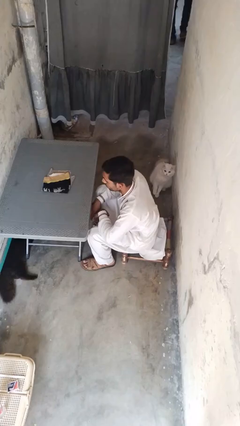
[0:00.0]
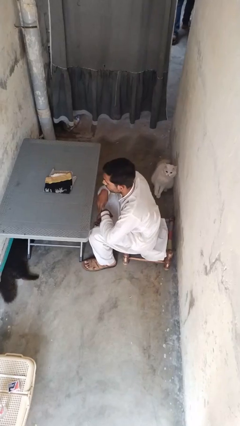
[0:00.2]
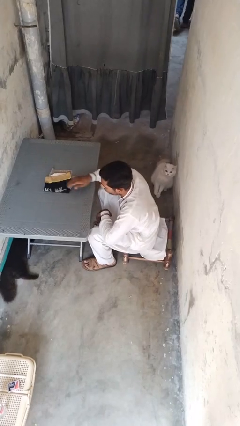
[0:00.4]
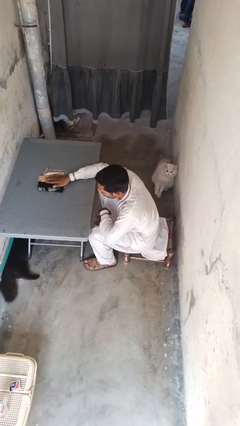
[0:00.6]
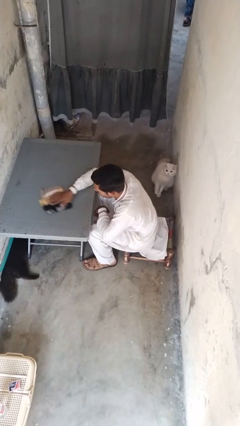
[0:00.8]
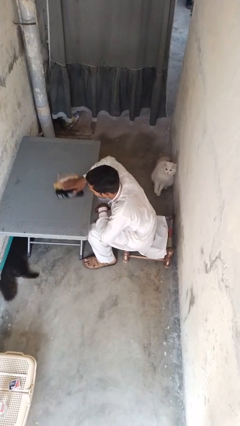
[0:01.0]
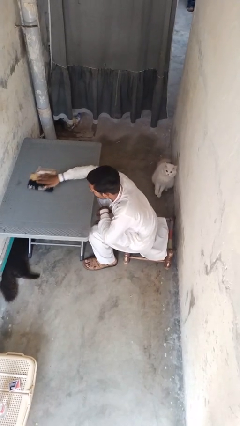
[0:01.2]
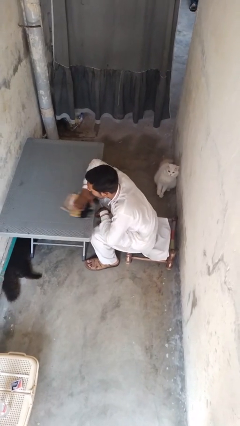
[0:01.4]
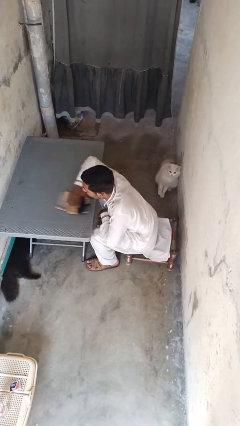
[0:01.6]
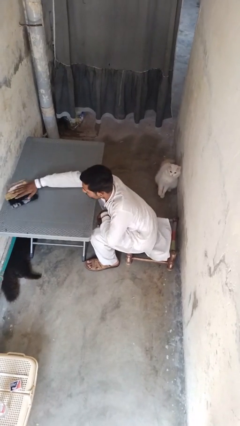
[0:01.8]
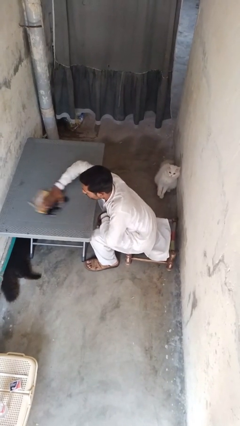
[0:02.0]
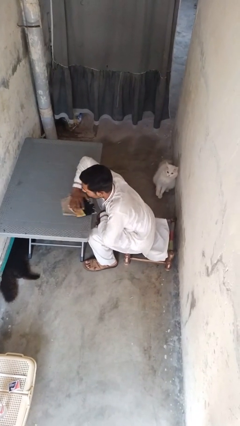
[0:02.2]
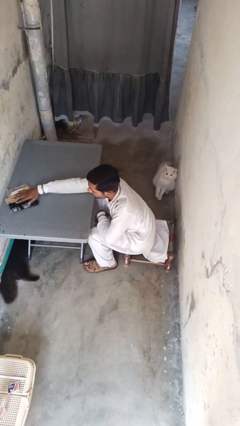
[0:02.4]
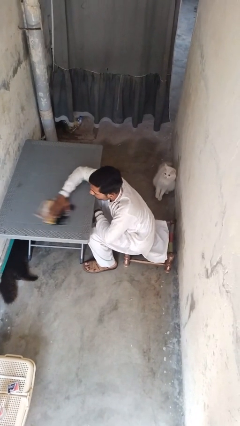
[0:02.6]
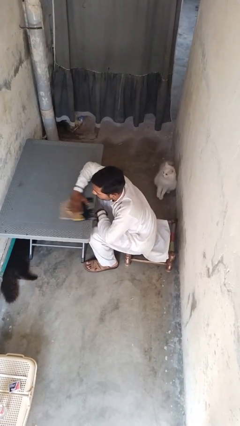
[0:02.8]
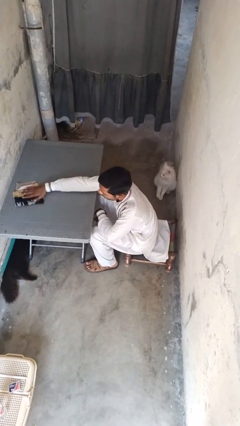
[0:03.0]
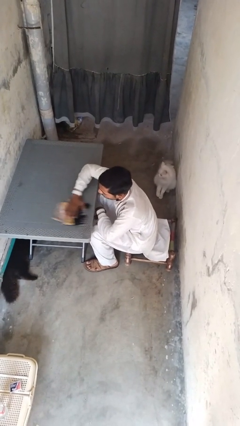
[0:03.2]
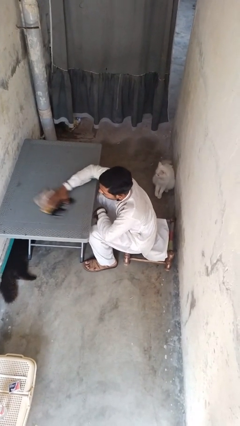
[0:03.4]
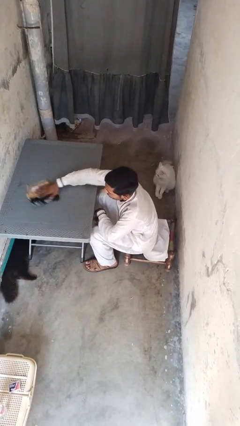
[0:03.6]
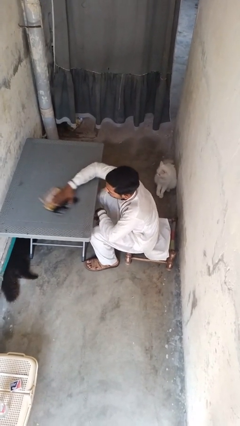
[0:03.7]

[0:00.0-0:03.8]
person cleans table with rag

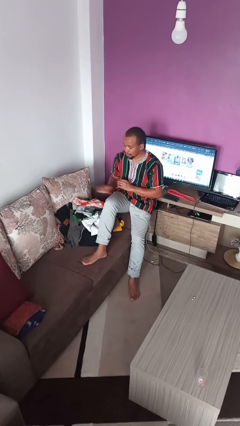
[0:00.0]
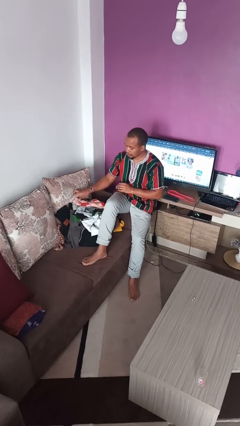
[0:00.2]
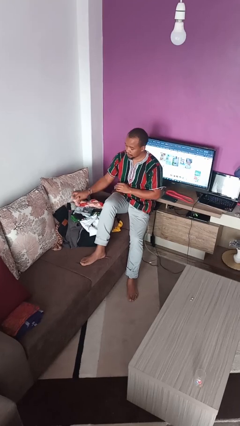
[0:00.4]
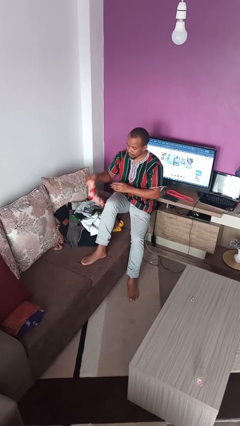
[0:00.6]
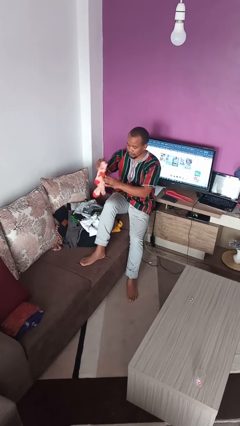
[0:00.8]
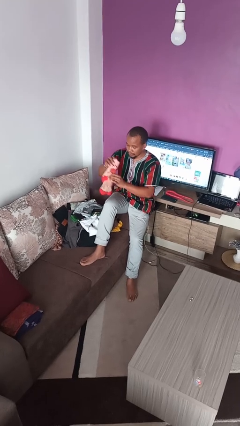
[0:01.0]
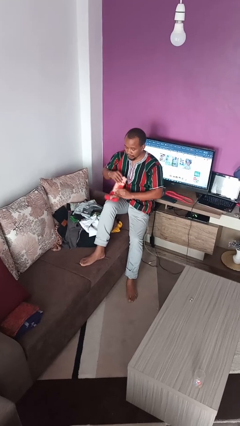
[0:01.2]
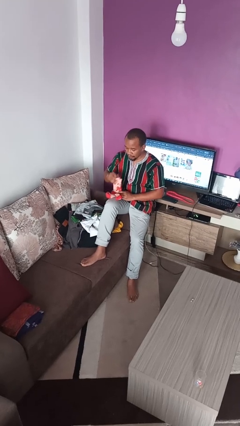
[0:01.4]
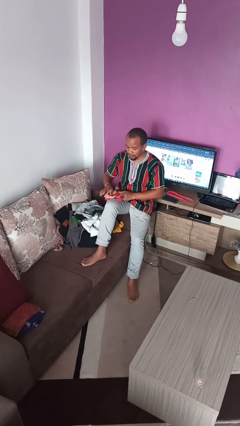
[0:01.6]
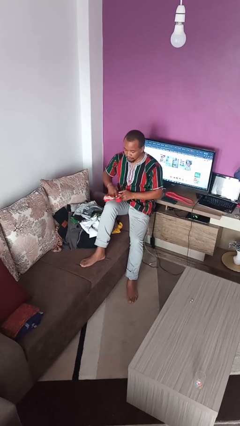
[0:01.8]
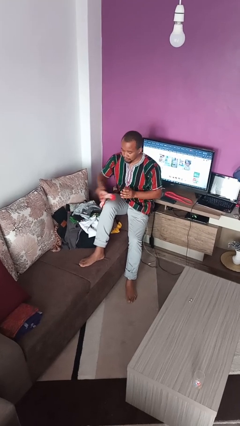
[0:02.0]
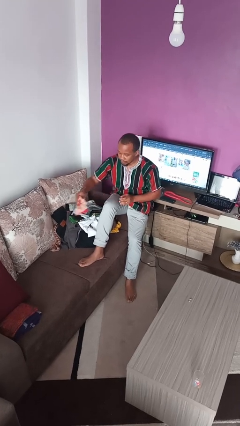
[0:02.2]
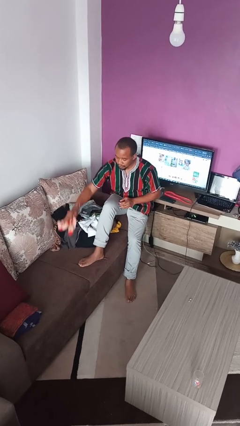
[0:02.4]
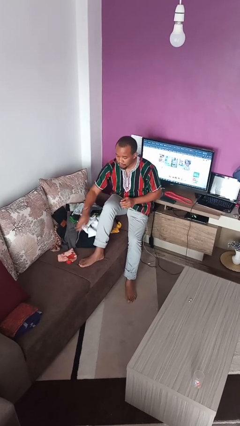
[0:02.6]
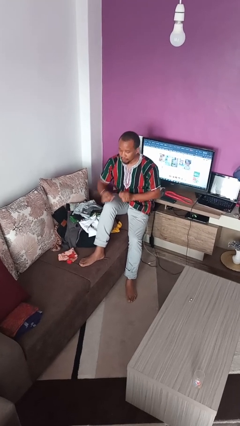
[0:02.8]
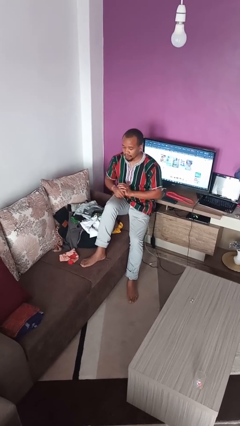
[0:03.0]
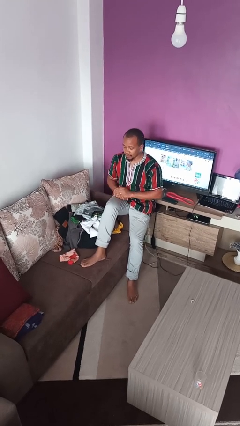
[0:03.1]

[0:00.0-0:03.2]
person folds socks

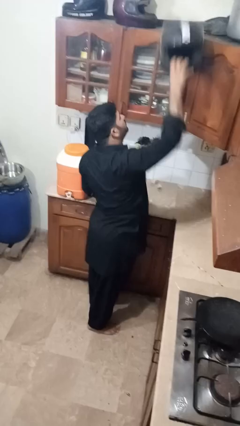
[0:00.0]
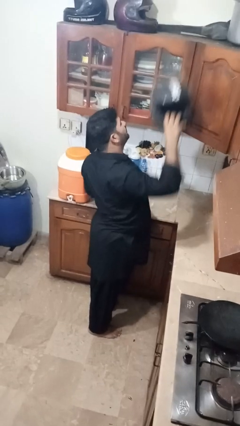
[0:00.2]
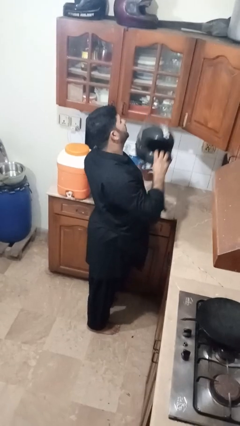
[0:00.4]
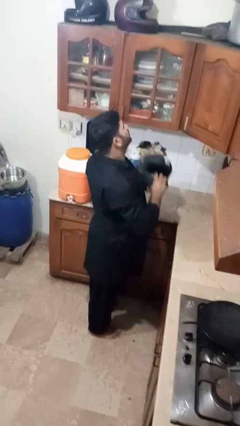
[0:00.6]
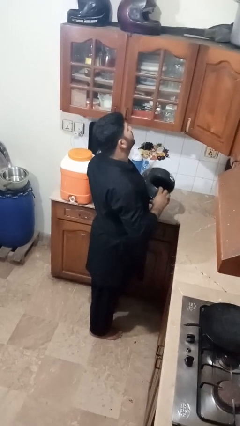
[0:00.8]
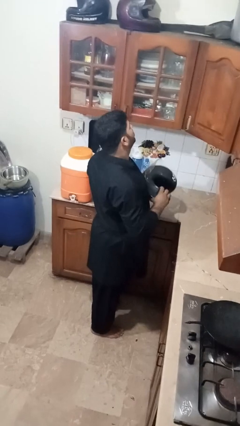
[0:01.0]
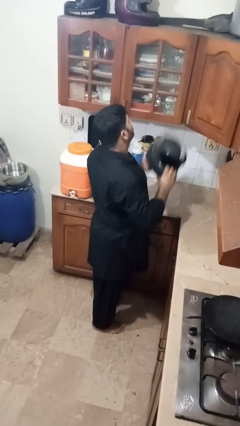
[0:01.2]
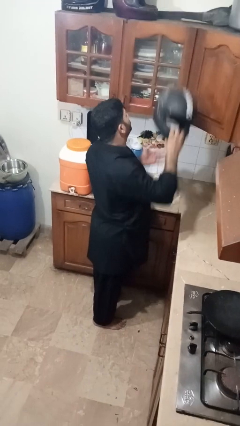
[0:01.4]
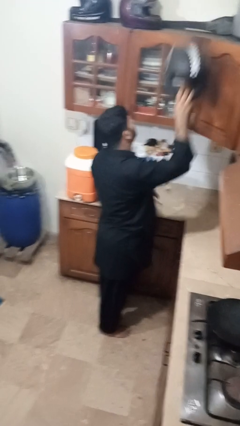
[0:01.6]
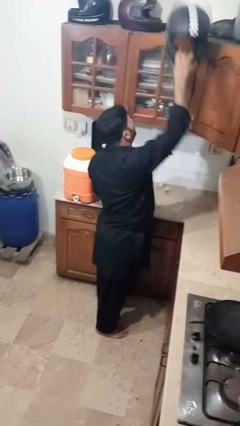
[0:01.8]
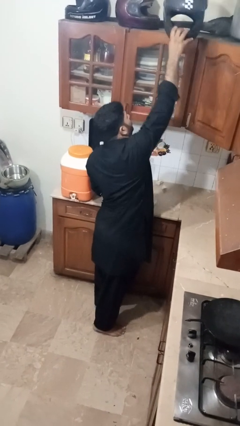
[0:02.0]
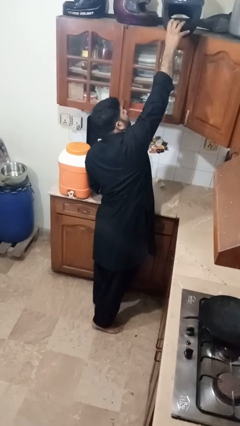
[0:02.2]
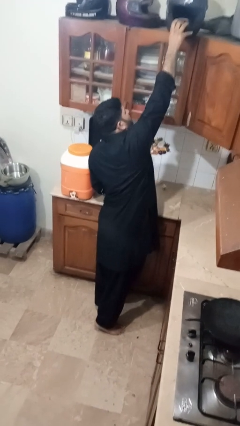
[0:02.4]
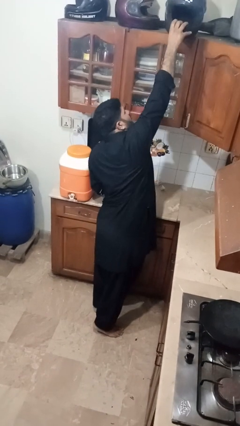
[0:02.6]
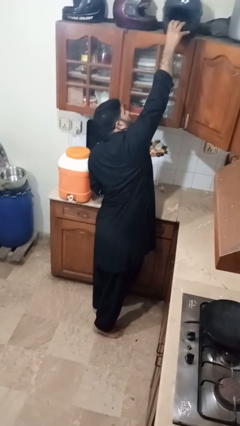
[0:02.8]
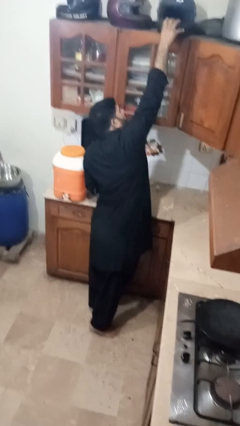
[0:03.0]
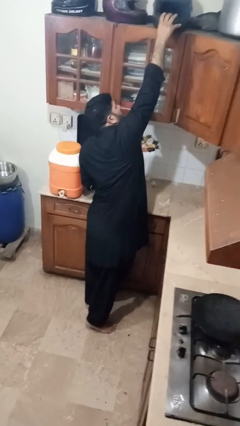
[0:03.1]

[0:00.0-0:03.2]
person puts down object on shelf

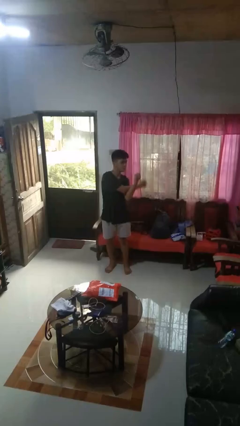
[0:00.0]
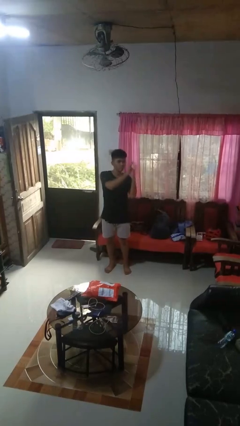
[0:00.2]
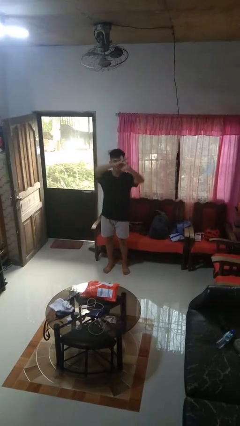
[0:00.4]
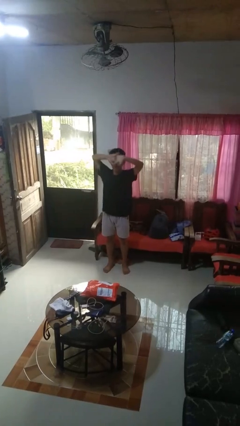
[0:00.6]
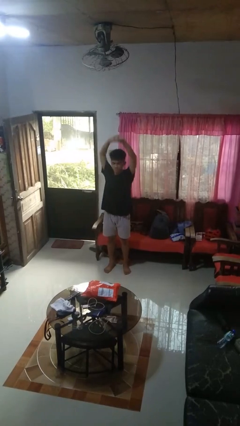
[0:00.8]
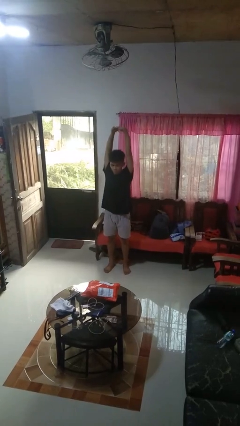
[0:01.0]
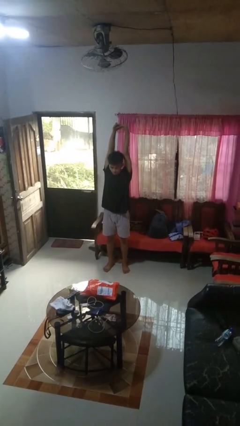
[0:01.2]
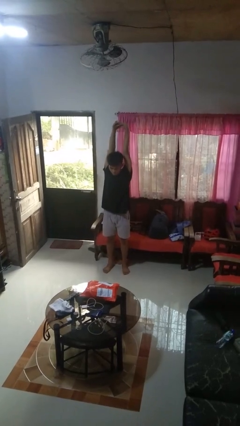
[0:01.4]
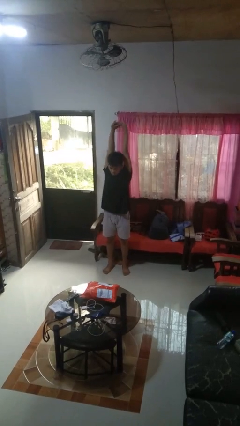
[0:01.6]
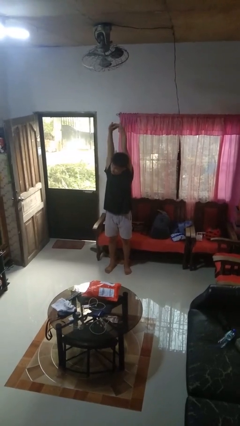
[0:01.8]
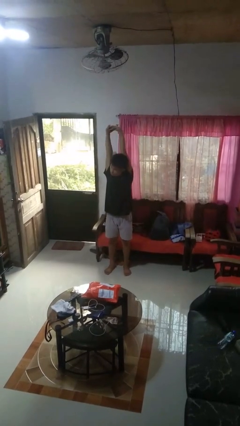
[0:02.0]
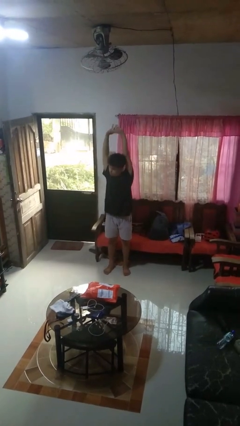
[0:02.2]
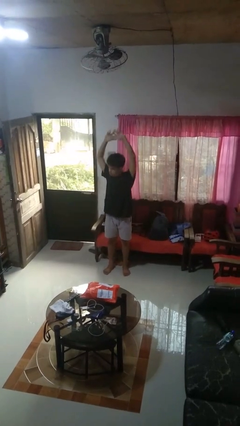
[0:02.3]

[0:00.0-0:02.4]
person stretches arms over head

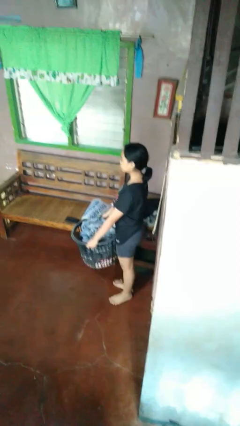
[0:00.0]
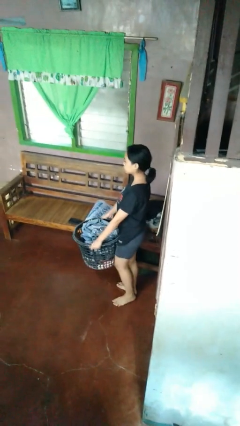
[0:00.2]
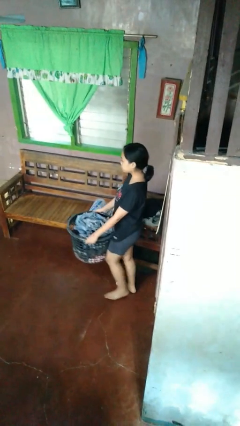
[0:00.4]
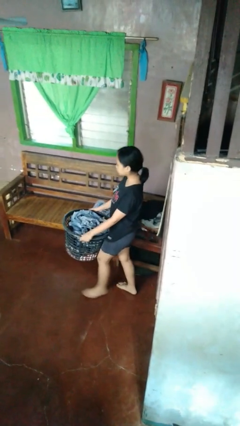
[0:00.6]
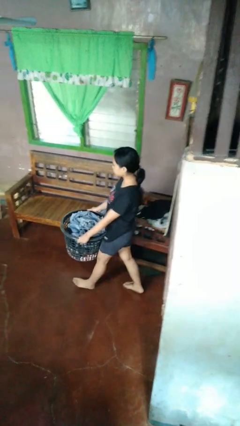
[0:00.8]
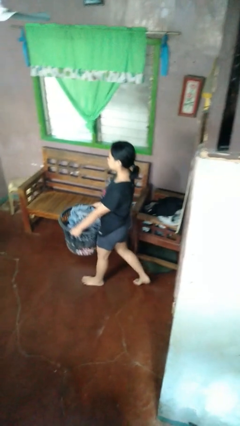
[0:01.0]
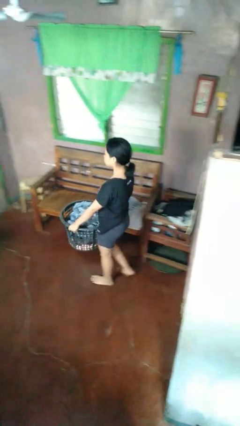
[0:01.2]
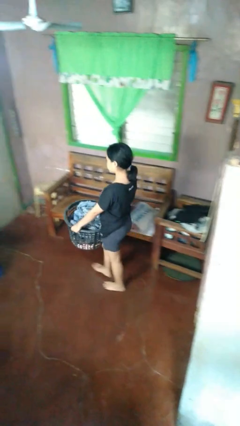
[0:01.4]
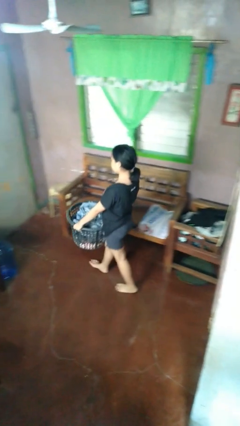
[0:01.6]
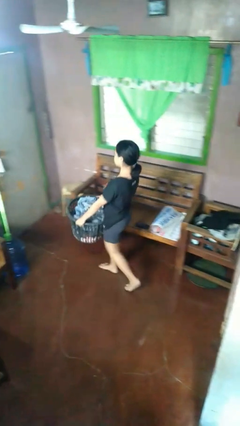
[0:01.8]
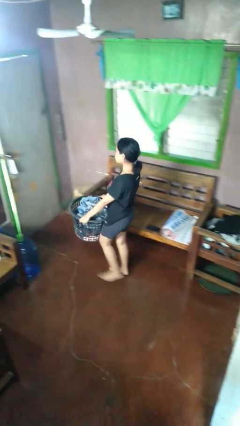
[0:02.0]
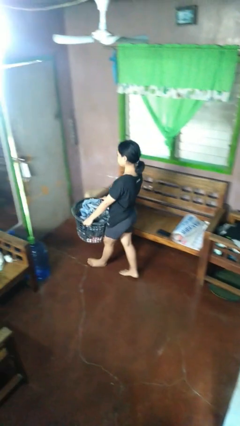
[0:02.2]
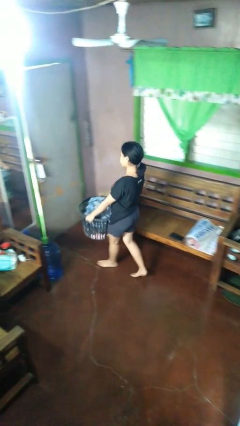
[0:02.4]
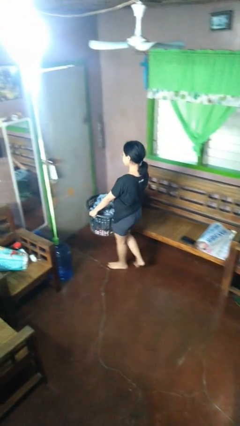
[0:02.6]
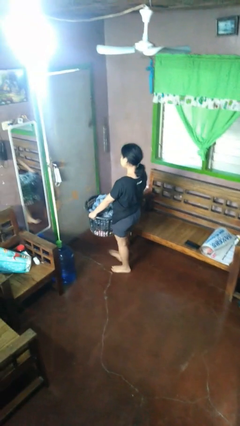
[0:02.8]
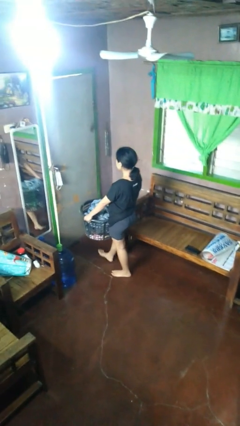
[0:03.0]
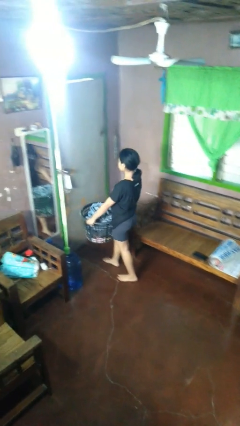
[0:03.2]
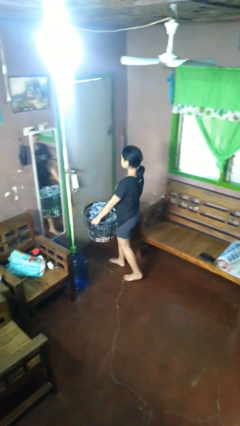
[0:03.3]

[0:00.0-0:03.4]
person carries laundry basket

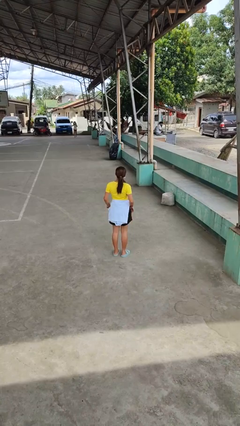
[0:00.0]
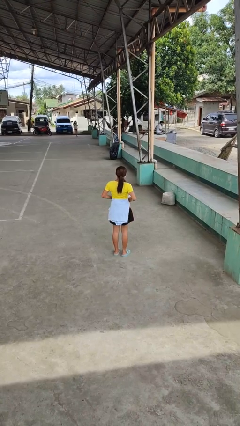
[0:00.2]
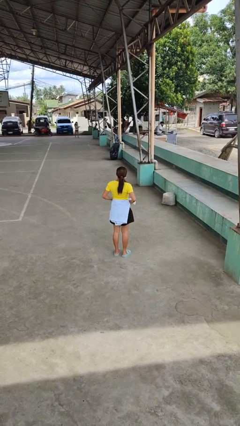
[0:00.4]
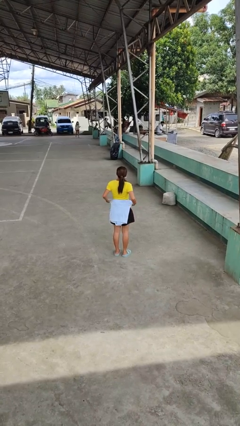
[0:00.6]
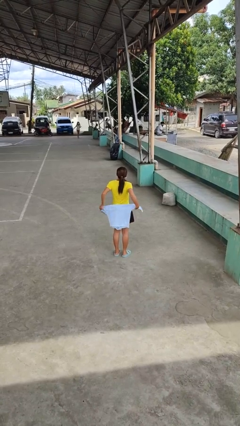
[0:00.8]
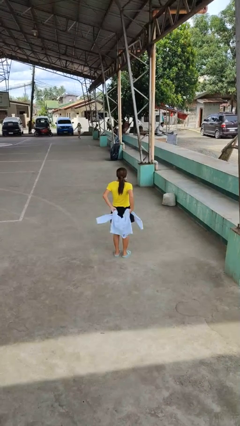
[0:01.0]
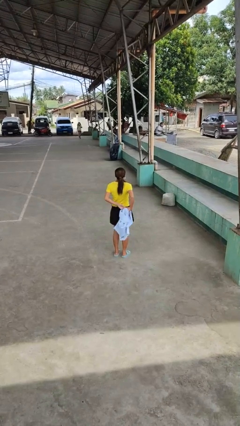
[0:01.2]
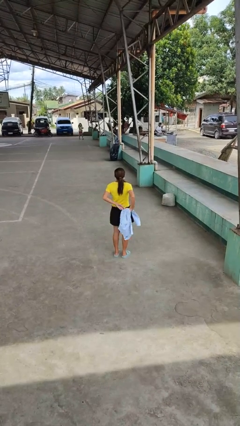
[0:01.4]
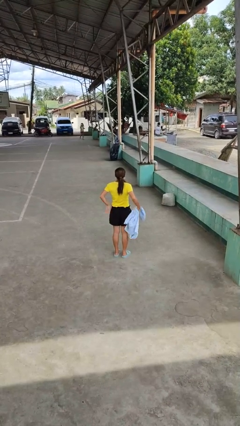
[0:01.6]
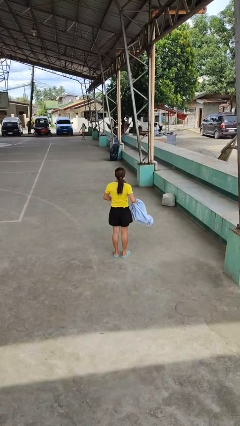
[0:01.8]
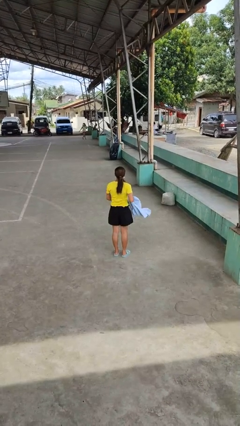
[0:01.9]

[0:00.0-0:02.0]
person unties jacket around waist
